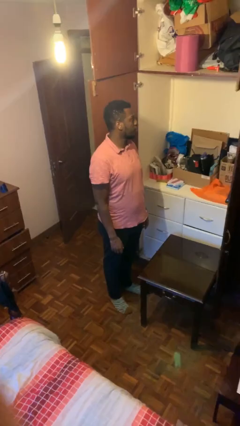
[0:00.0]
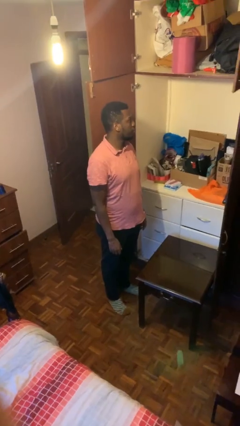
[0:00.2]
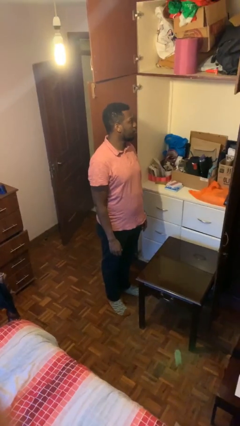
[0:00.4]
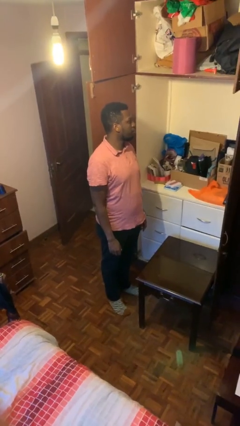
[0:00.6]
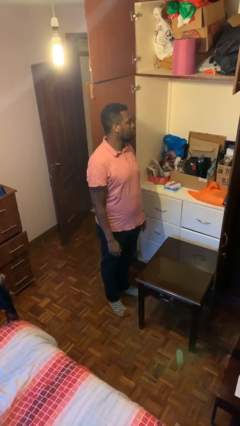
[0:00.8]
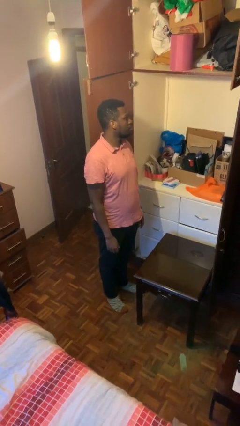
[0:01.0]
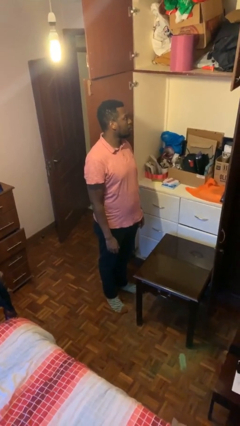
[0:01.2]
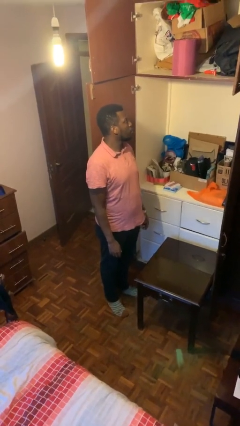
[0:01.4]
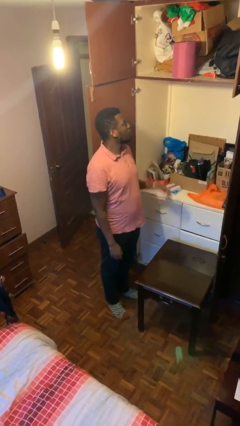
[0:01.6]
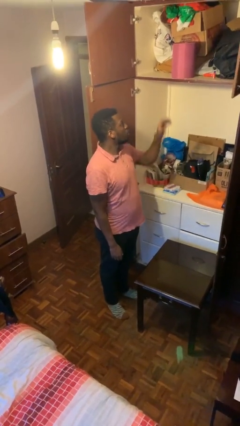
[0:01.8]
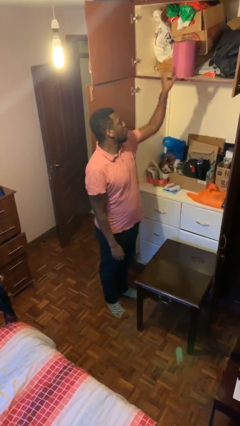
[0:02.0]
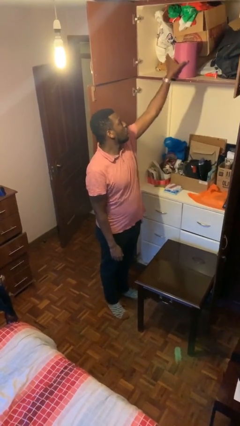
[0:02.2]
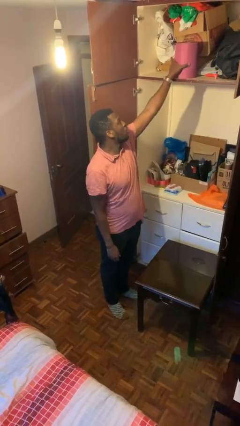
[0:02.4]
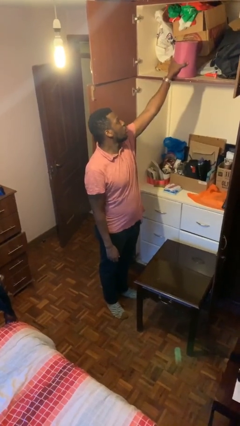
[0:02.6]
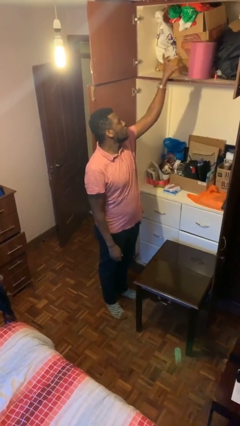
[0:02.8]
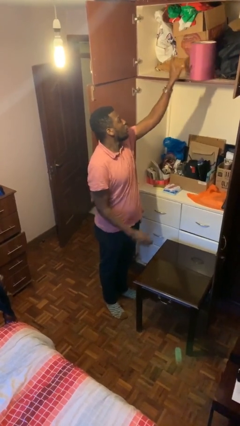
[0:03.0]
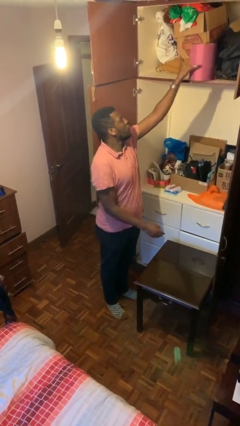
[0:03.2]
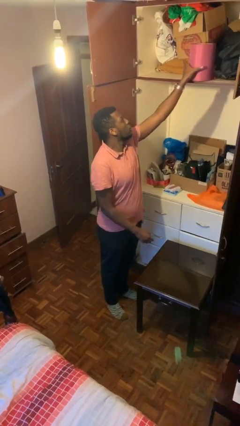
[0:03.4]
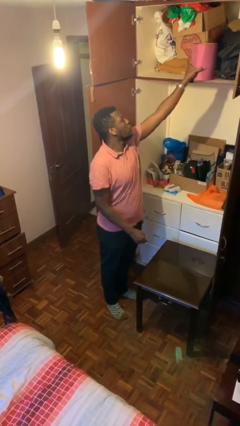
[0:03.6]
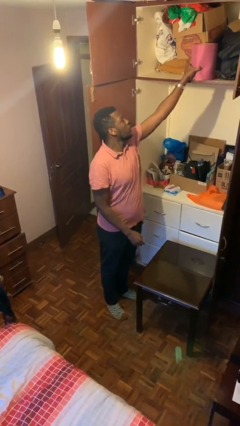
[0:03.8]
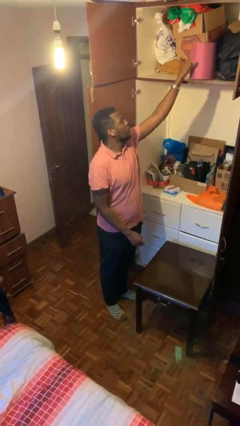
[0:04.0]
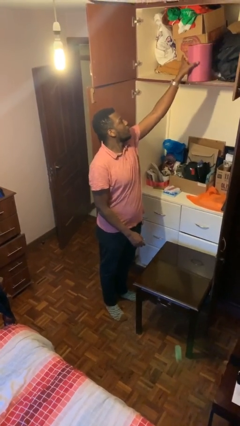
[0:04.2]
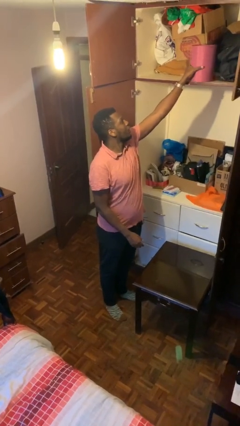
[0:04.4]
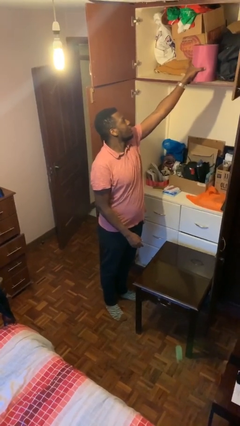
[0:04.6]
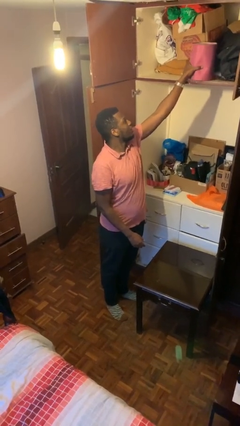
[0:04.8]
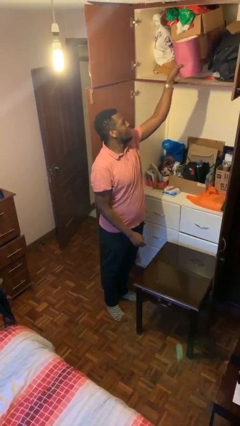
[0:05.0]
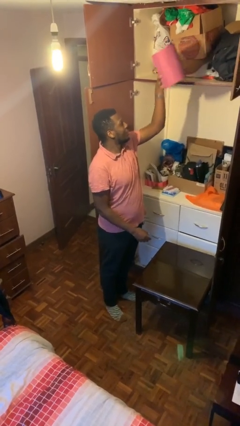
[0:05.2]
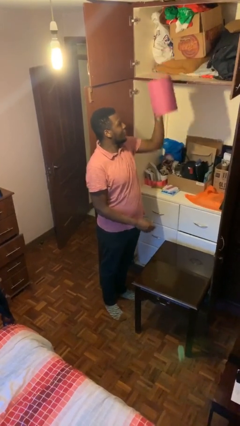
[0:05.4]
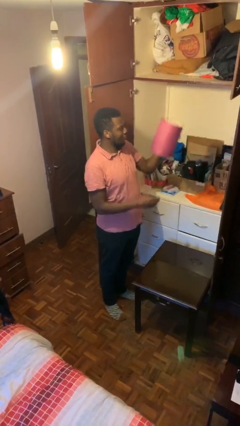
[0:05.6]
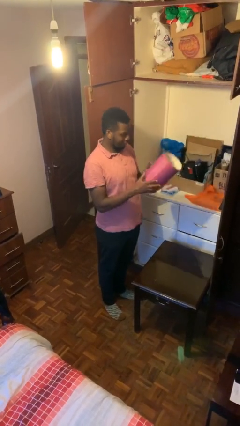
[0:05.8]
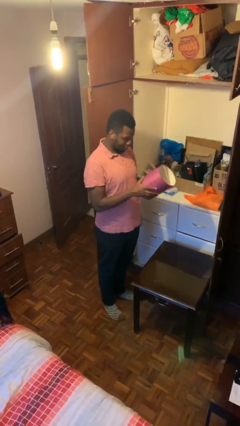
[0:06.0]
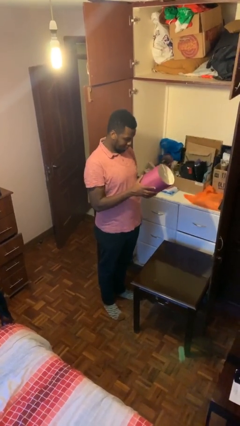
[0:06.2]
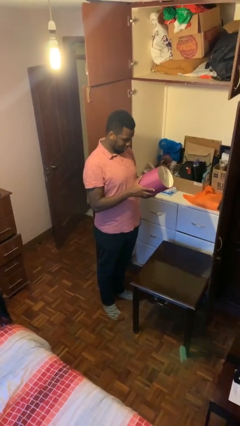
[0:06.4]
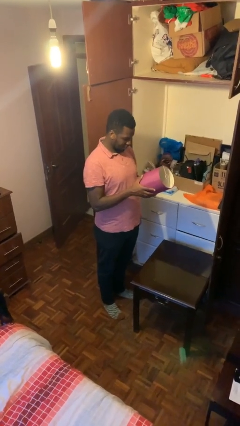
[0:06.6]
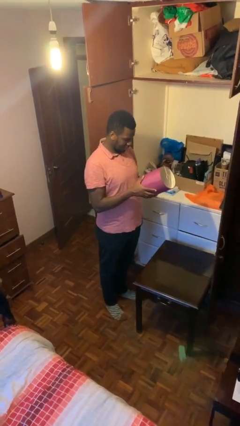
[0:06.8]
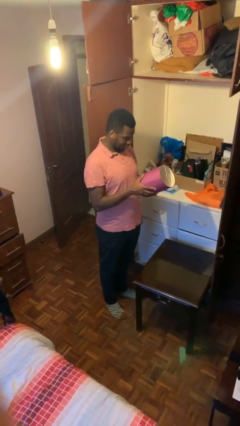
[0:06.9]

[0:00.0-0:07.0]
person picks up object from shelf

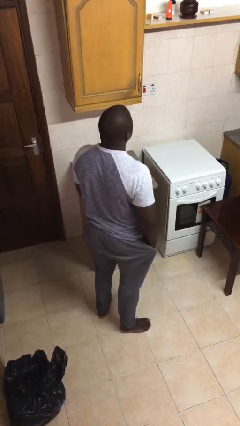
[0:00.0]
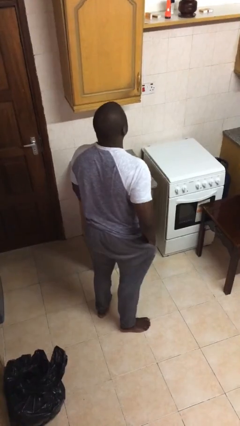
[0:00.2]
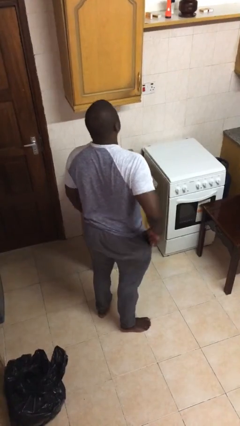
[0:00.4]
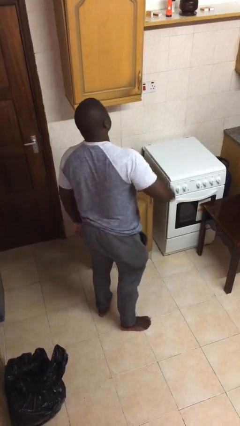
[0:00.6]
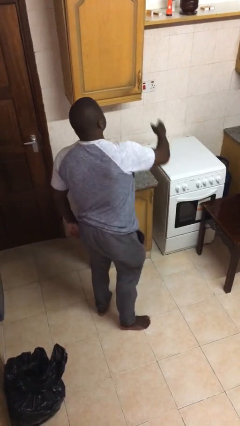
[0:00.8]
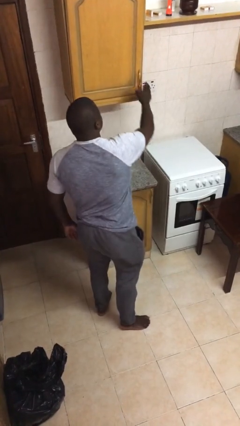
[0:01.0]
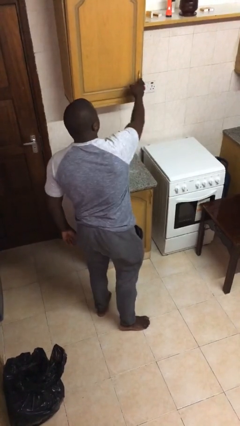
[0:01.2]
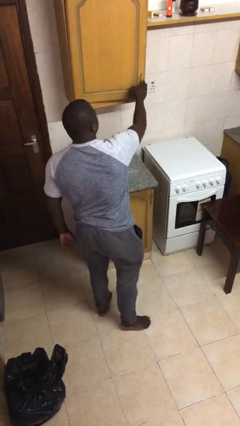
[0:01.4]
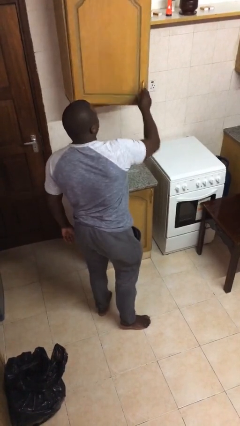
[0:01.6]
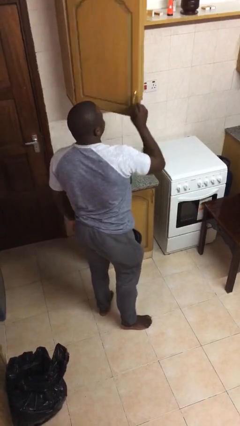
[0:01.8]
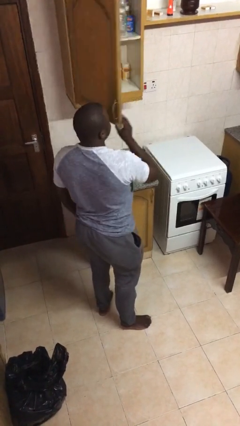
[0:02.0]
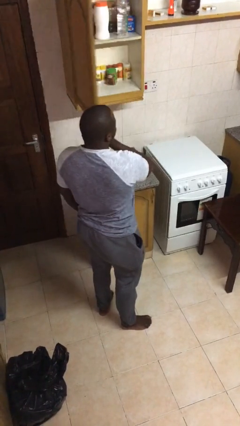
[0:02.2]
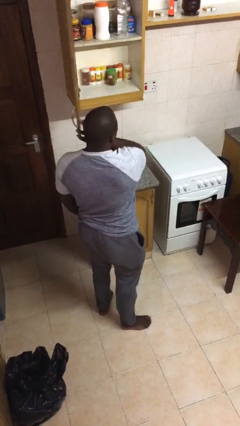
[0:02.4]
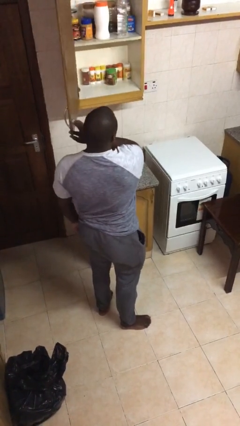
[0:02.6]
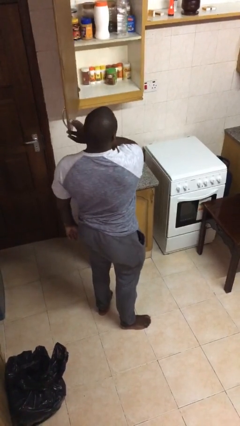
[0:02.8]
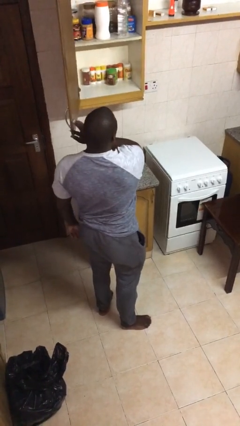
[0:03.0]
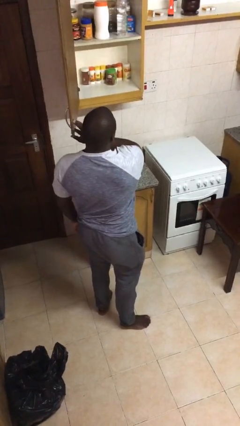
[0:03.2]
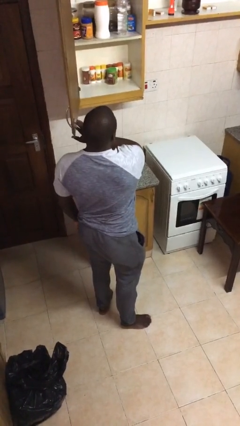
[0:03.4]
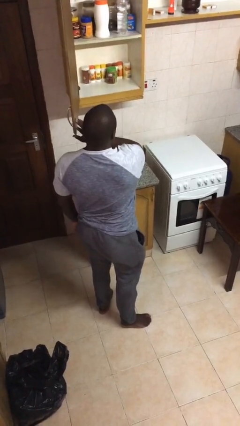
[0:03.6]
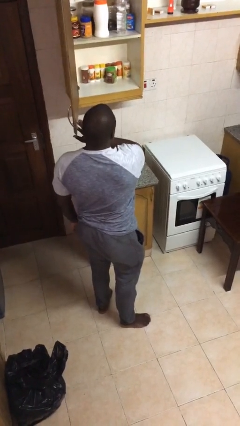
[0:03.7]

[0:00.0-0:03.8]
person opens cabinet

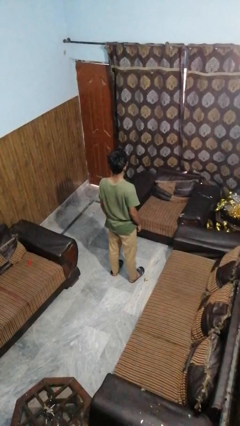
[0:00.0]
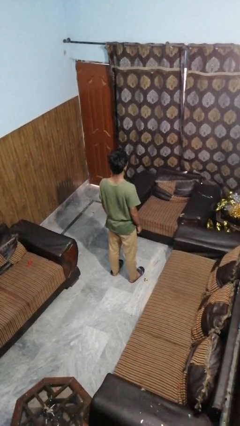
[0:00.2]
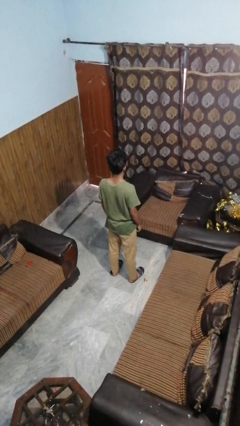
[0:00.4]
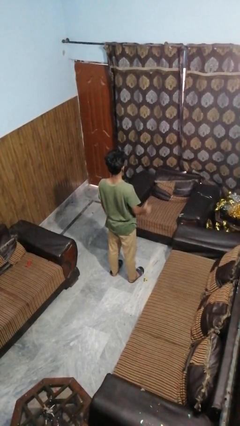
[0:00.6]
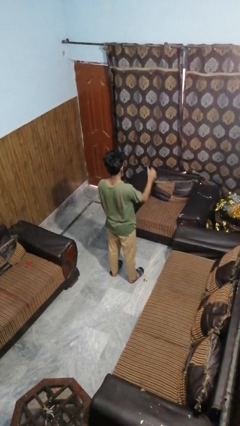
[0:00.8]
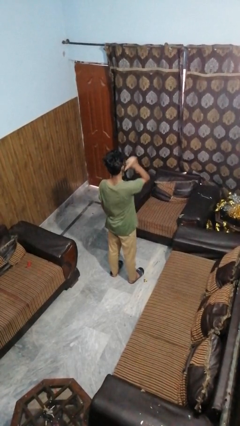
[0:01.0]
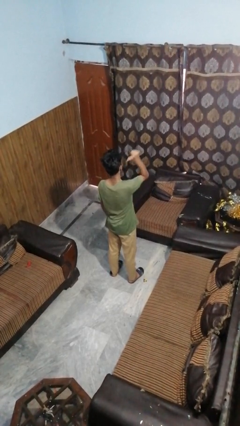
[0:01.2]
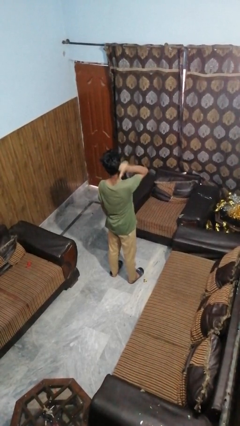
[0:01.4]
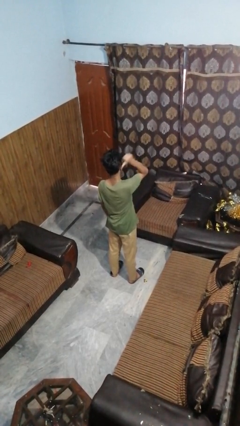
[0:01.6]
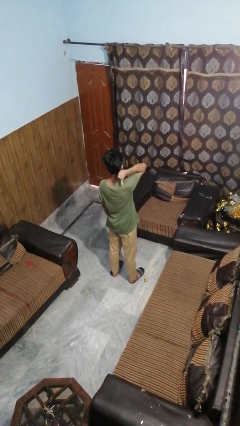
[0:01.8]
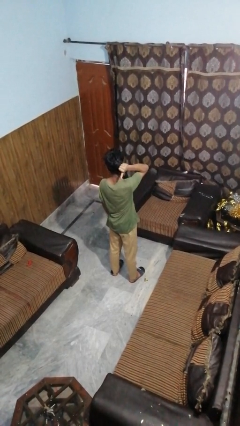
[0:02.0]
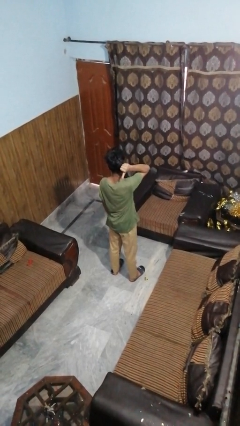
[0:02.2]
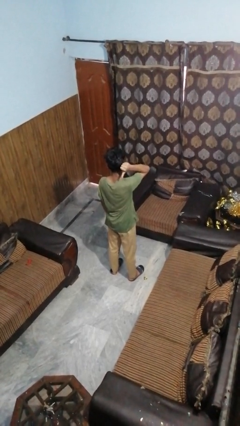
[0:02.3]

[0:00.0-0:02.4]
person gestures behind me

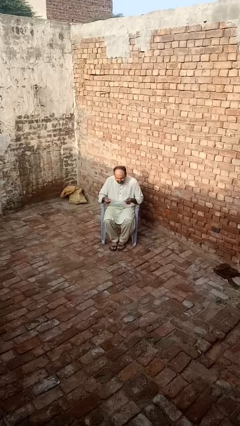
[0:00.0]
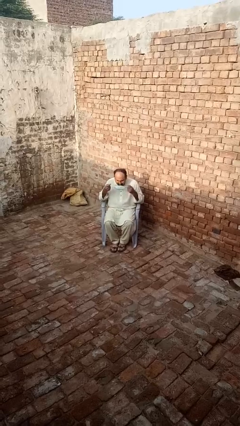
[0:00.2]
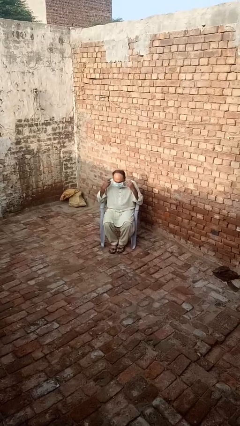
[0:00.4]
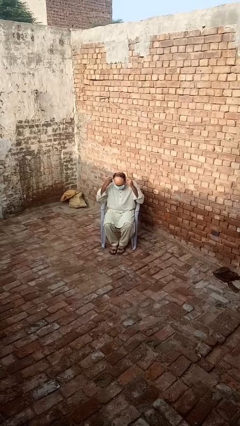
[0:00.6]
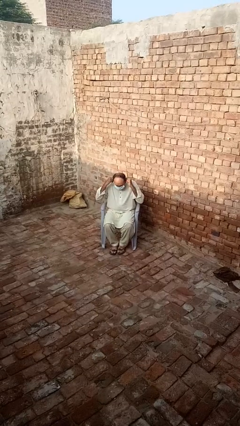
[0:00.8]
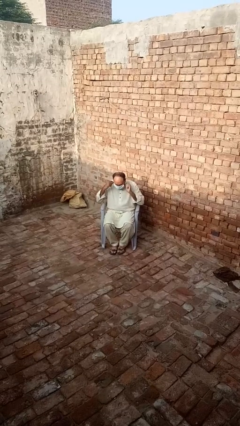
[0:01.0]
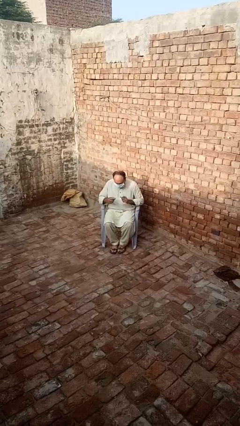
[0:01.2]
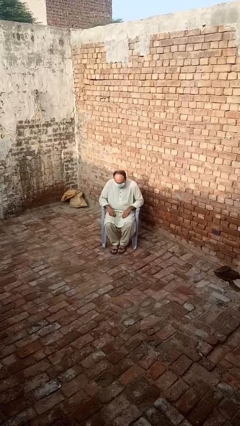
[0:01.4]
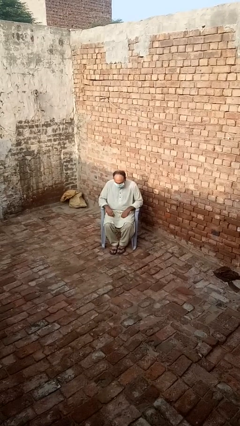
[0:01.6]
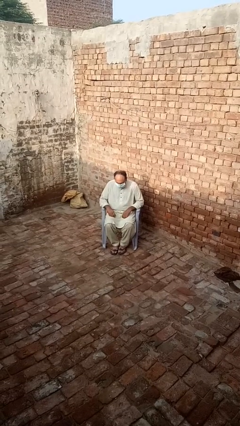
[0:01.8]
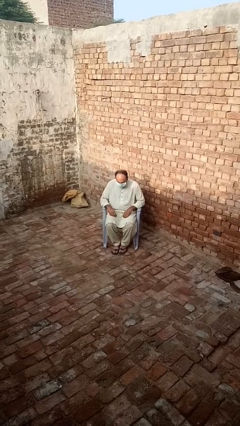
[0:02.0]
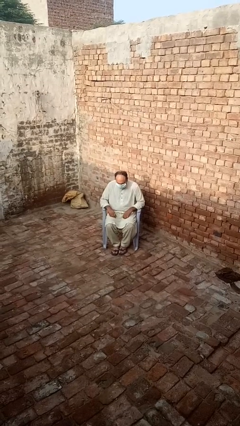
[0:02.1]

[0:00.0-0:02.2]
person puts on facemask

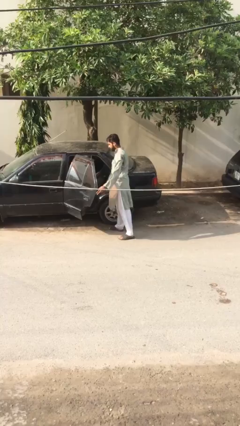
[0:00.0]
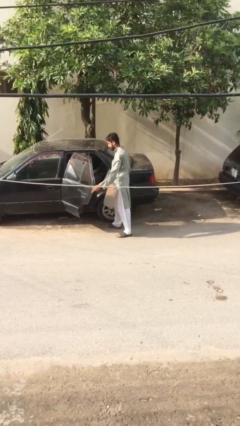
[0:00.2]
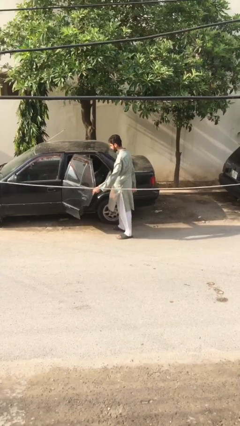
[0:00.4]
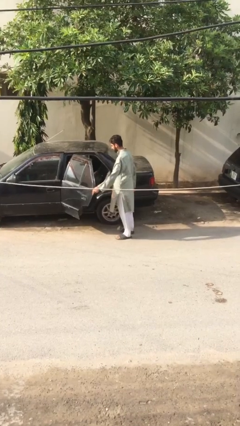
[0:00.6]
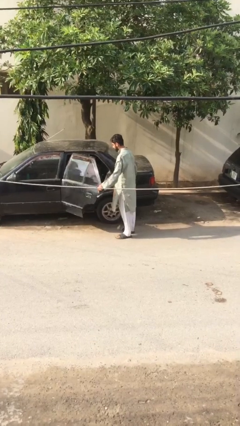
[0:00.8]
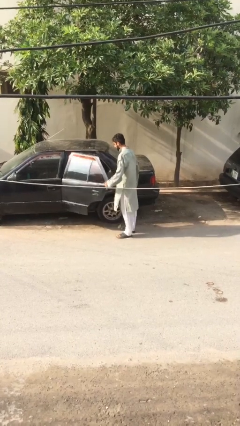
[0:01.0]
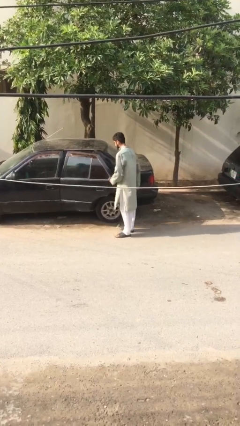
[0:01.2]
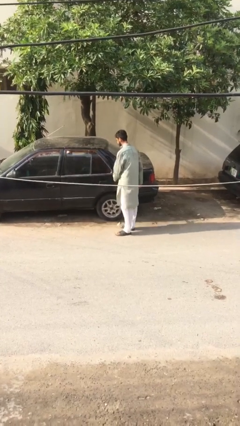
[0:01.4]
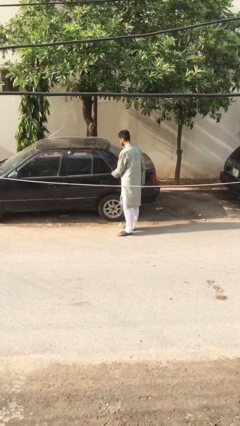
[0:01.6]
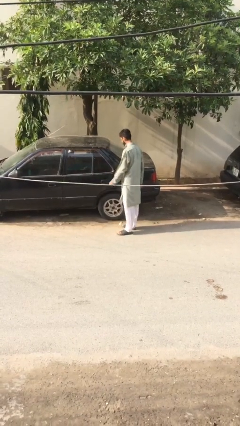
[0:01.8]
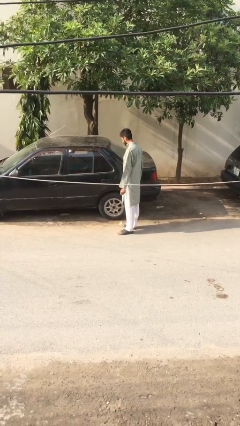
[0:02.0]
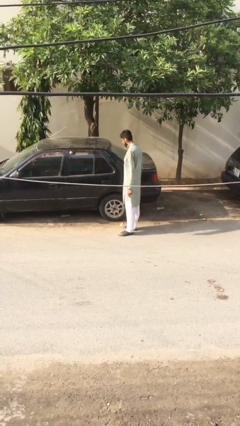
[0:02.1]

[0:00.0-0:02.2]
person closes car door
